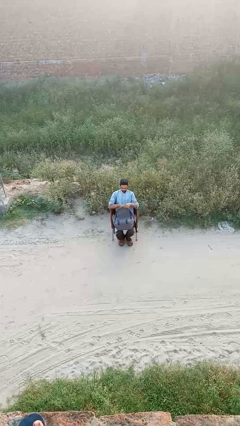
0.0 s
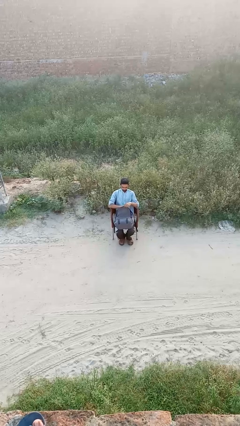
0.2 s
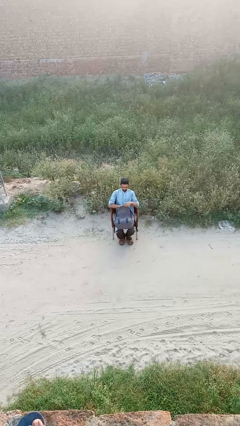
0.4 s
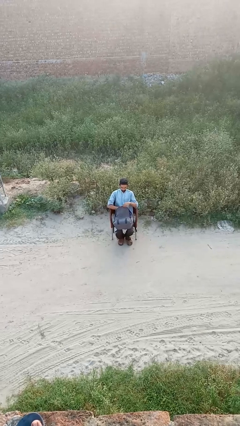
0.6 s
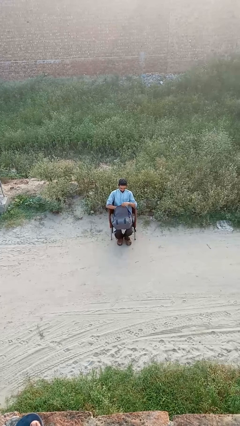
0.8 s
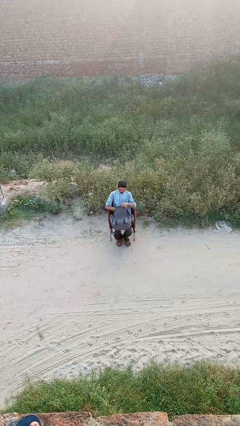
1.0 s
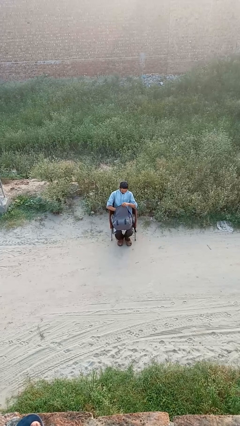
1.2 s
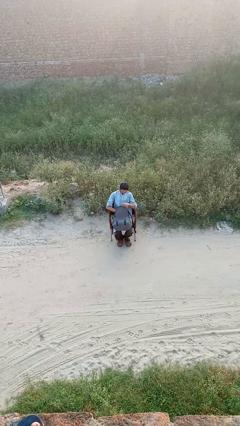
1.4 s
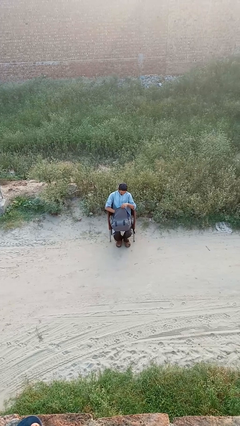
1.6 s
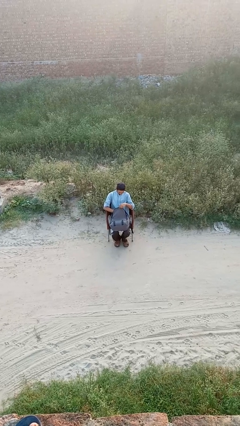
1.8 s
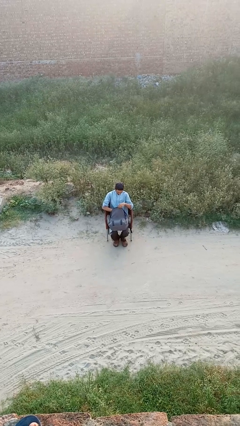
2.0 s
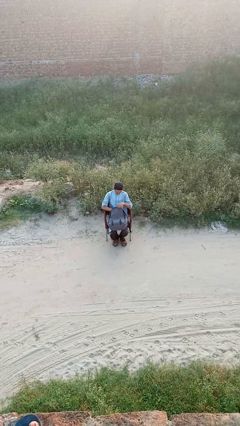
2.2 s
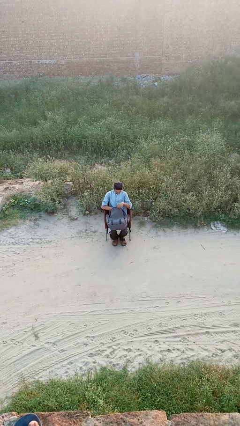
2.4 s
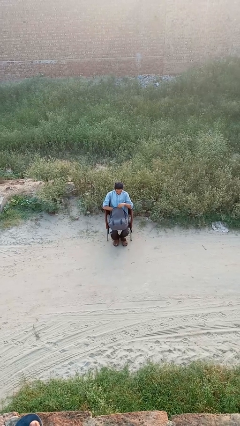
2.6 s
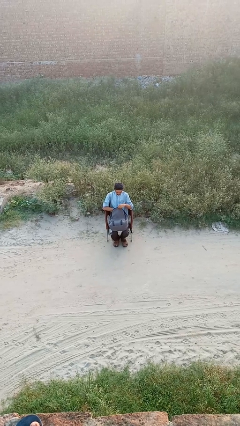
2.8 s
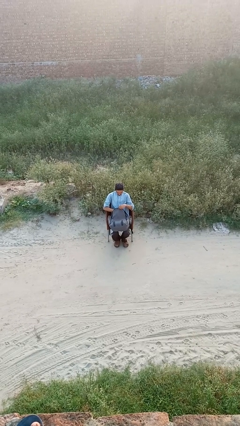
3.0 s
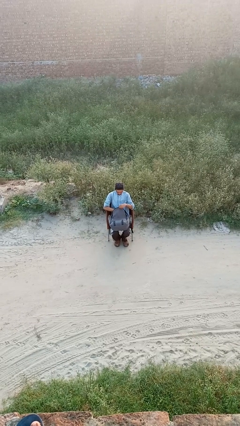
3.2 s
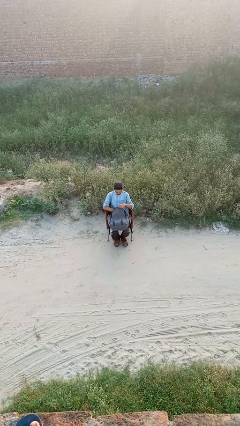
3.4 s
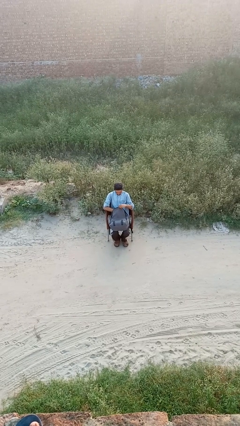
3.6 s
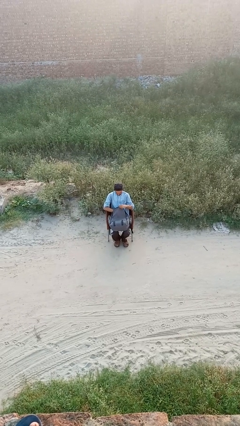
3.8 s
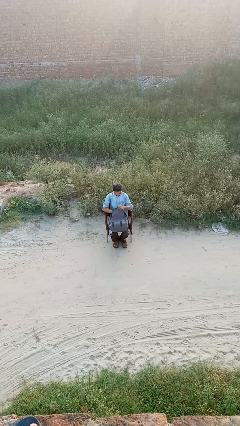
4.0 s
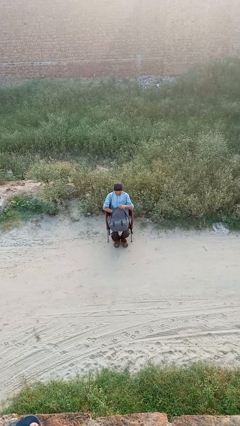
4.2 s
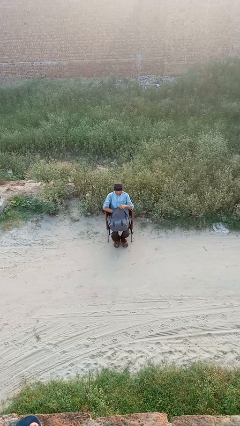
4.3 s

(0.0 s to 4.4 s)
person searches in backpack

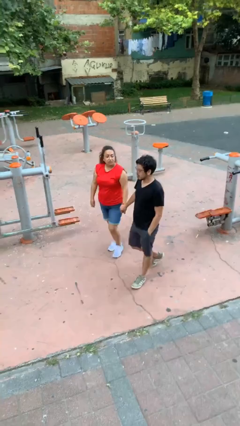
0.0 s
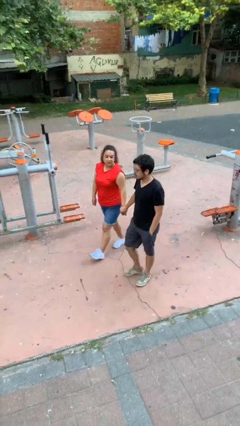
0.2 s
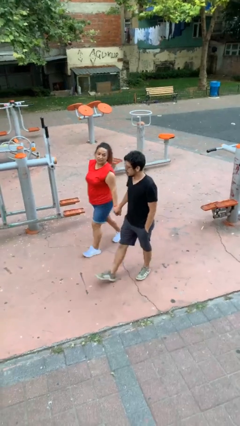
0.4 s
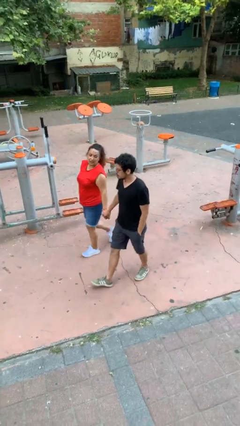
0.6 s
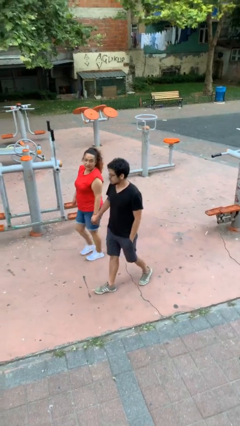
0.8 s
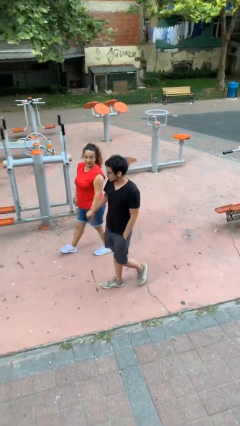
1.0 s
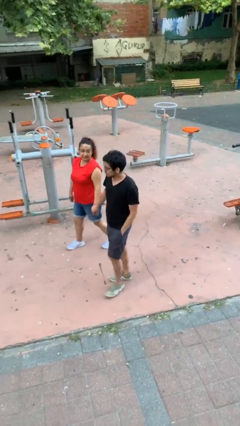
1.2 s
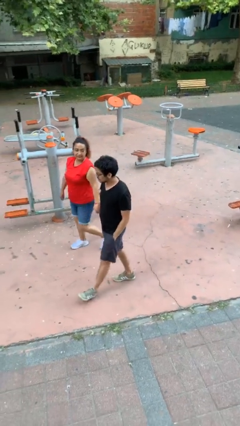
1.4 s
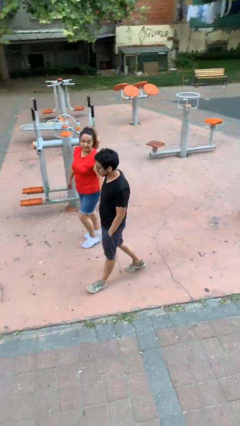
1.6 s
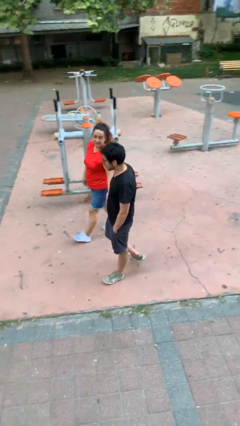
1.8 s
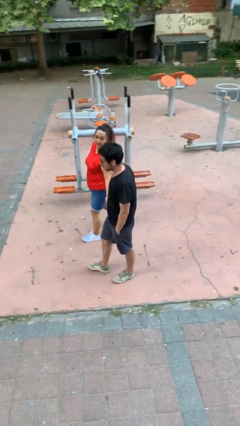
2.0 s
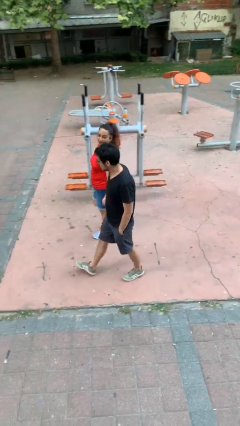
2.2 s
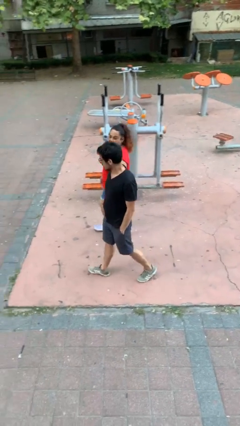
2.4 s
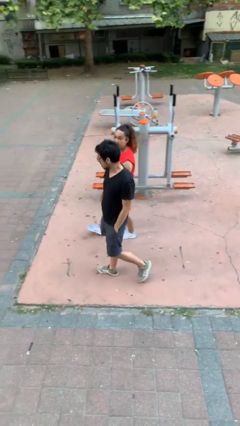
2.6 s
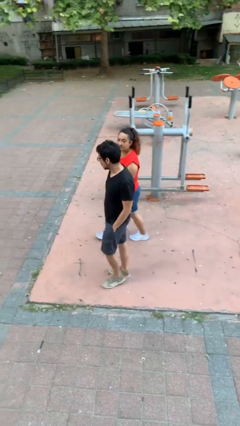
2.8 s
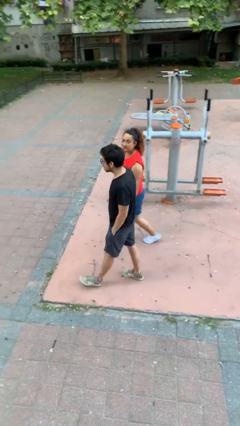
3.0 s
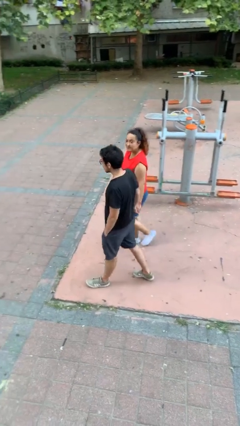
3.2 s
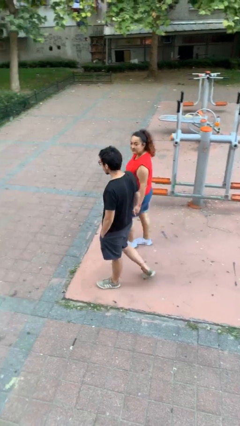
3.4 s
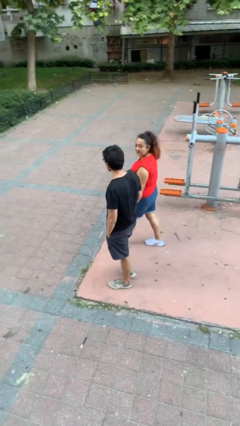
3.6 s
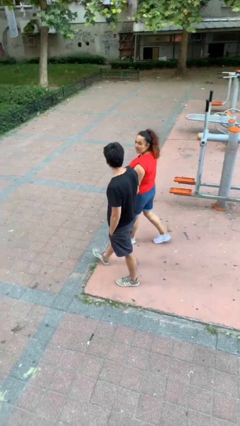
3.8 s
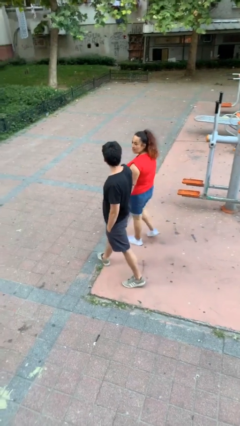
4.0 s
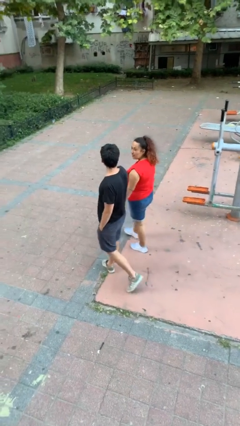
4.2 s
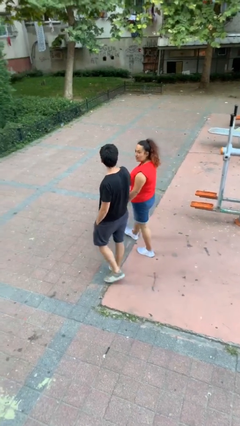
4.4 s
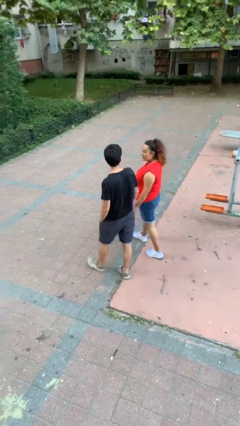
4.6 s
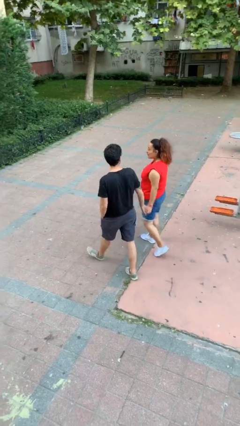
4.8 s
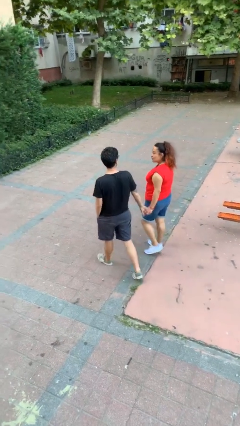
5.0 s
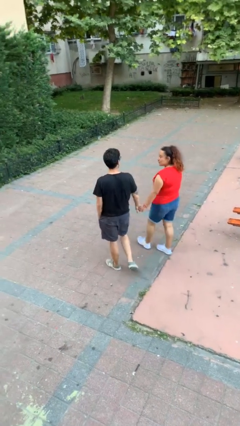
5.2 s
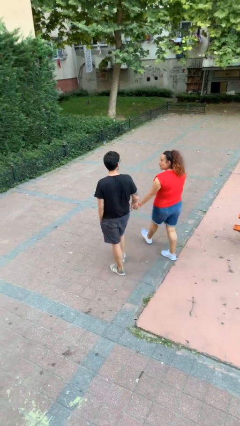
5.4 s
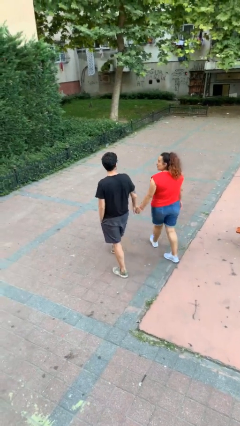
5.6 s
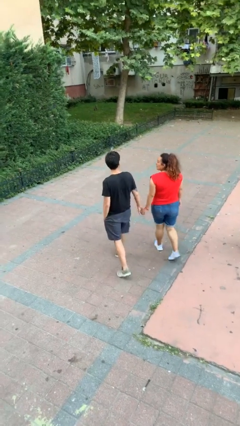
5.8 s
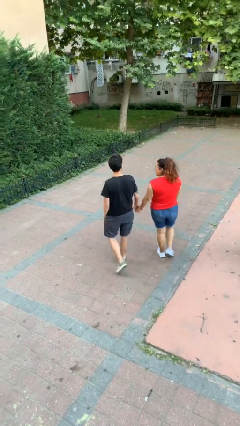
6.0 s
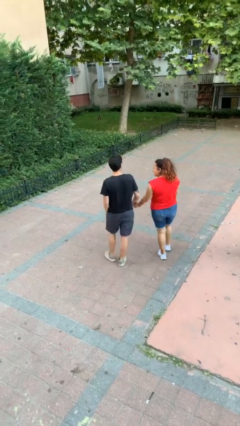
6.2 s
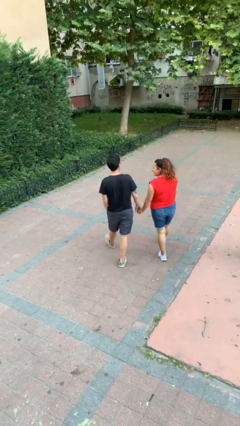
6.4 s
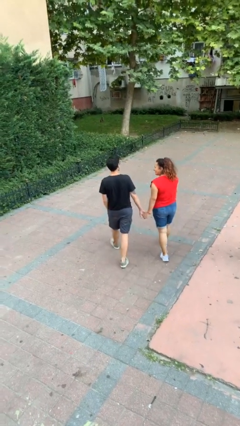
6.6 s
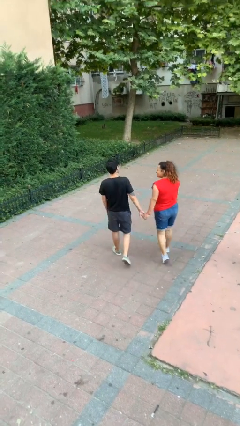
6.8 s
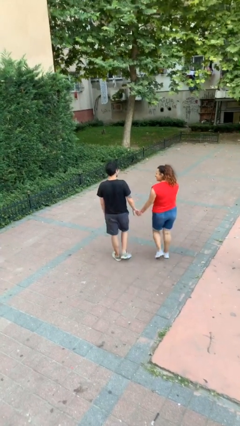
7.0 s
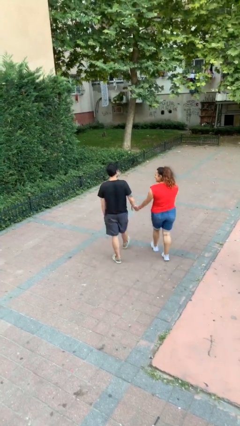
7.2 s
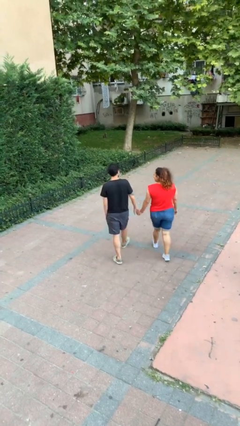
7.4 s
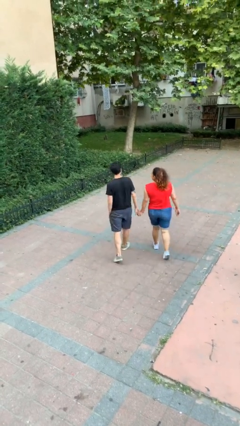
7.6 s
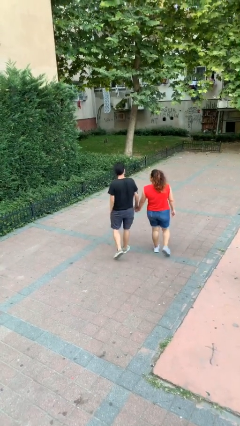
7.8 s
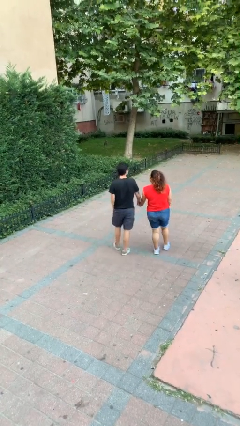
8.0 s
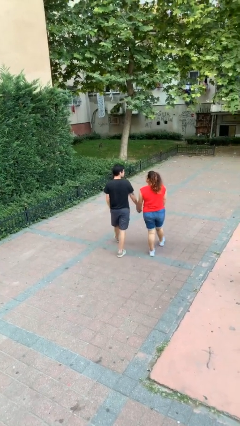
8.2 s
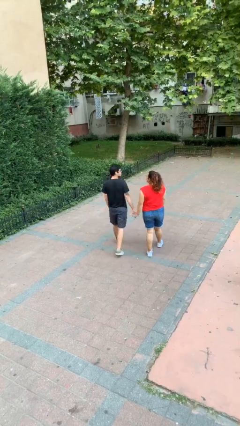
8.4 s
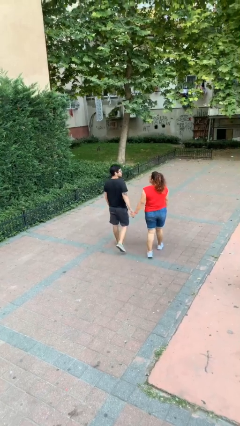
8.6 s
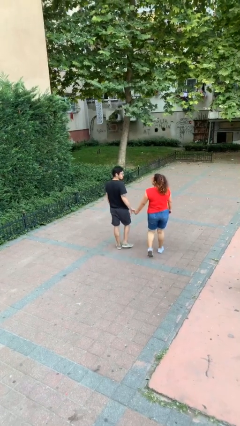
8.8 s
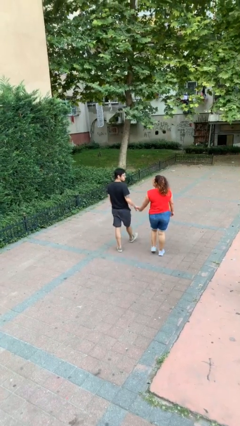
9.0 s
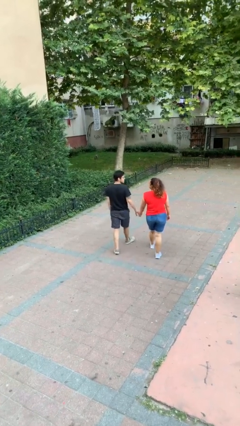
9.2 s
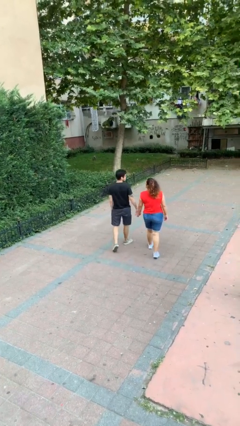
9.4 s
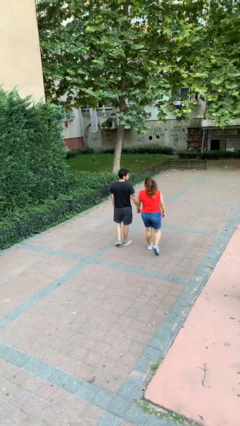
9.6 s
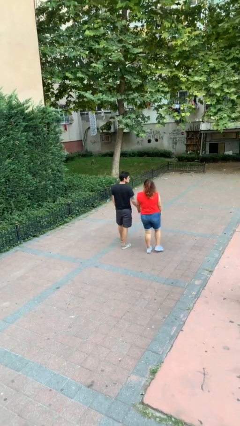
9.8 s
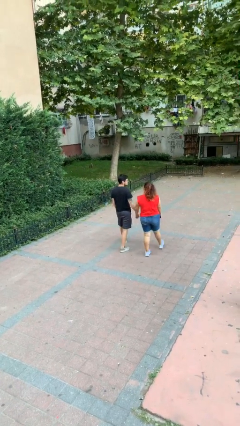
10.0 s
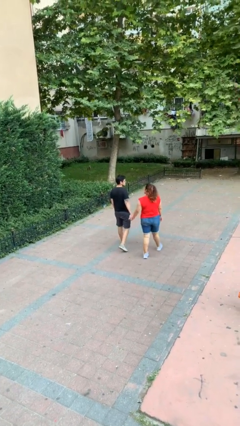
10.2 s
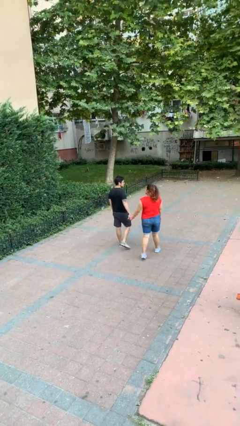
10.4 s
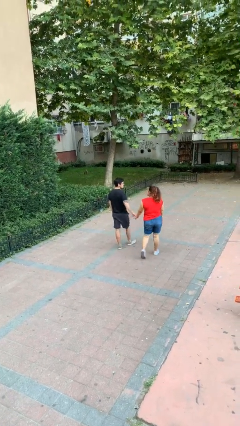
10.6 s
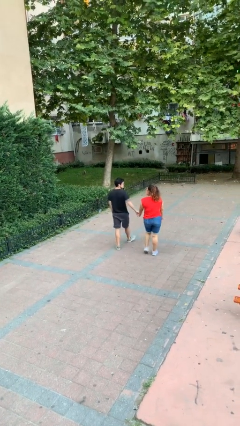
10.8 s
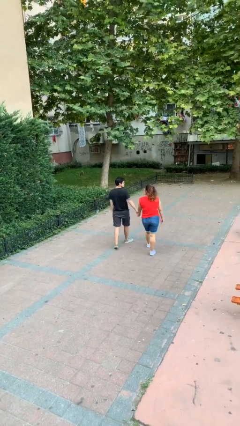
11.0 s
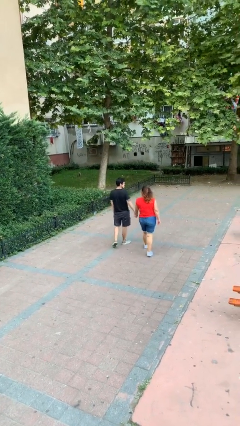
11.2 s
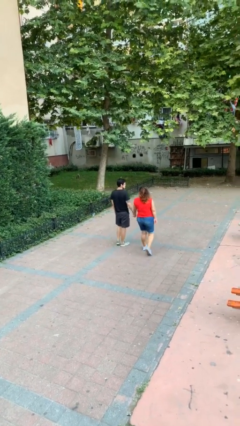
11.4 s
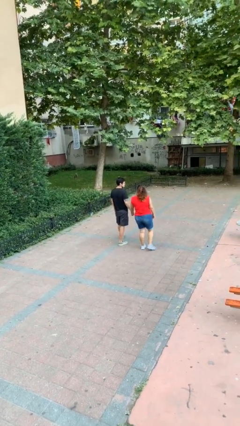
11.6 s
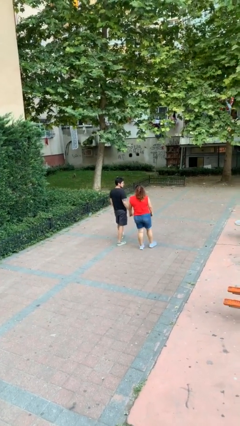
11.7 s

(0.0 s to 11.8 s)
person holds hand

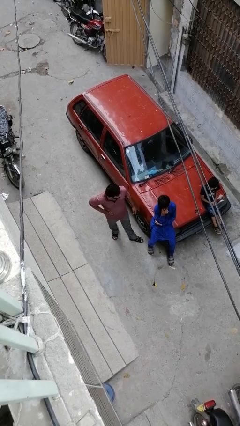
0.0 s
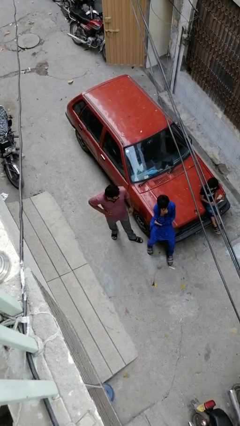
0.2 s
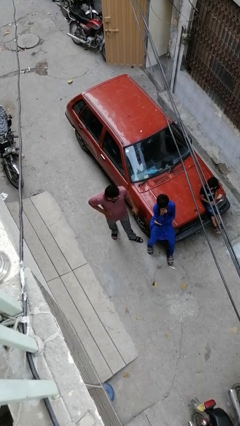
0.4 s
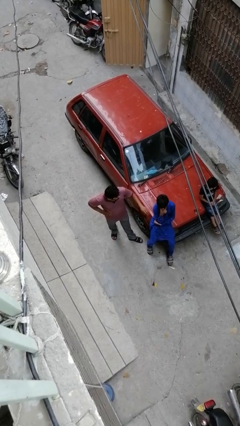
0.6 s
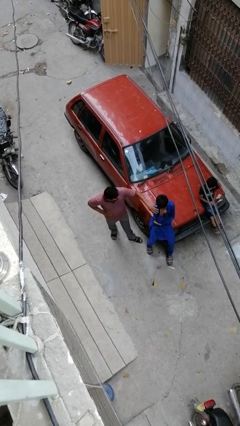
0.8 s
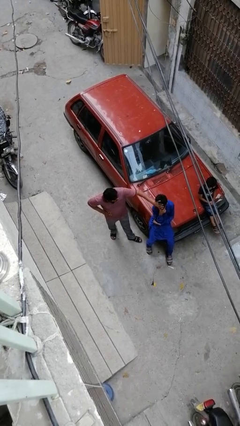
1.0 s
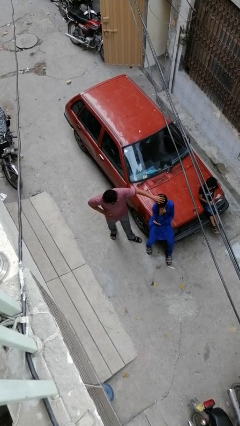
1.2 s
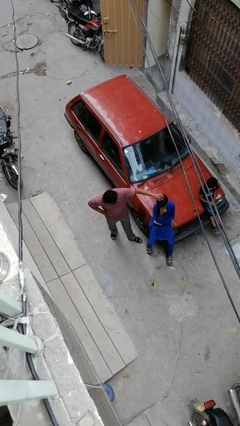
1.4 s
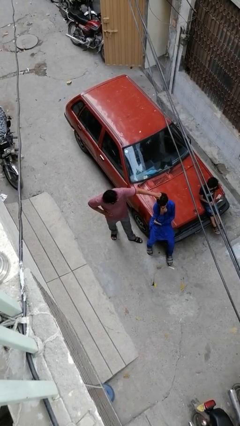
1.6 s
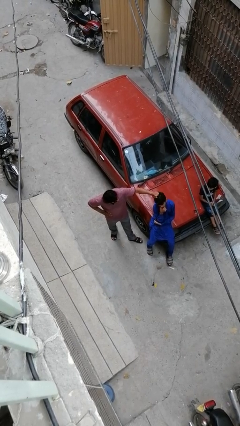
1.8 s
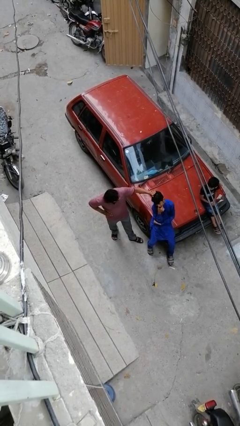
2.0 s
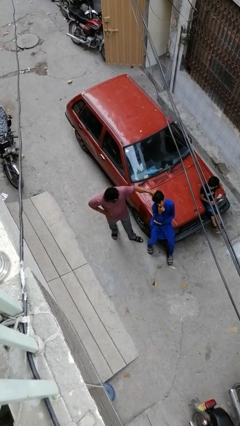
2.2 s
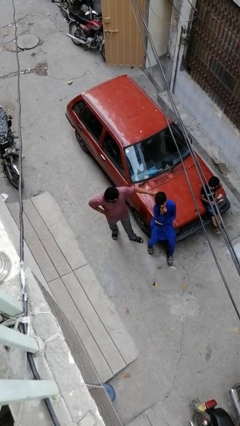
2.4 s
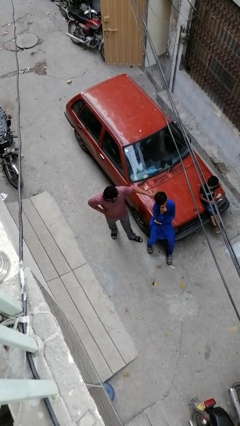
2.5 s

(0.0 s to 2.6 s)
person grabs person by hair
